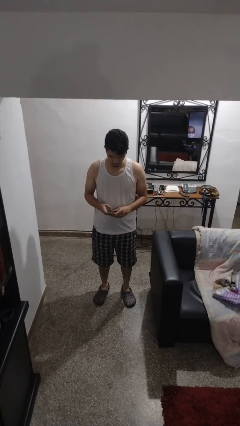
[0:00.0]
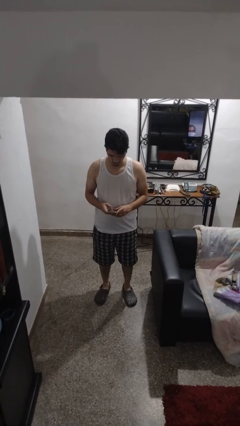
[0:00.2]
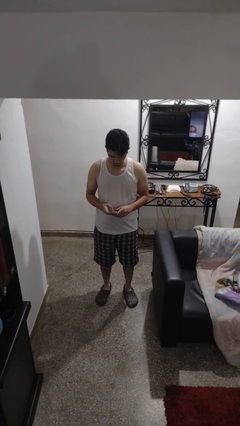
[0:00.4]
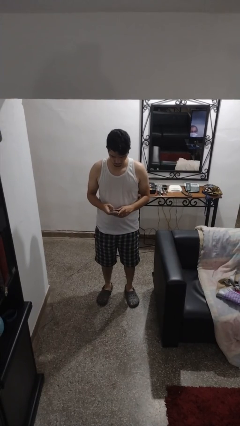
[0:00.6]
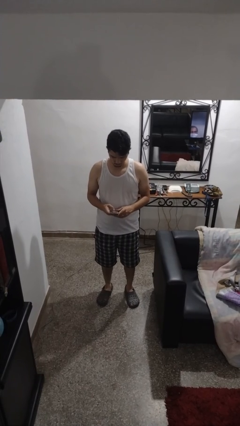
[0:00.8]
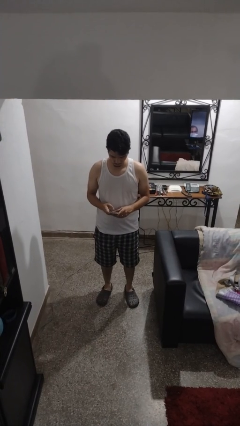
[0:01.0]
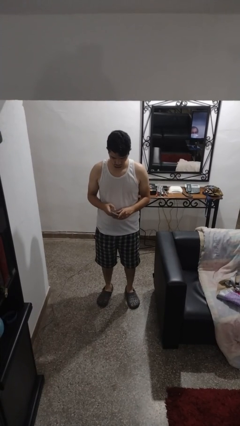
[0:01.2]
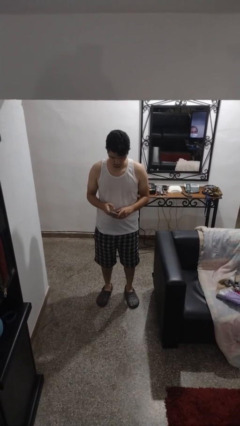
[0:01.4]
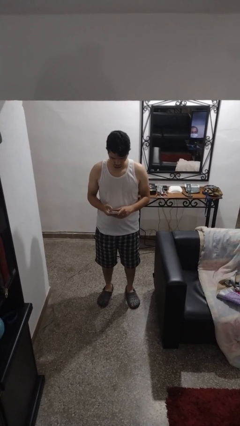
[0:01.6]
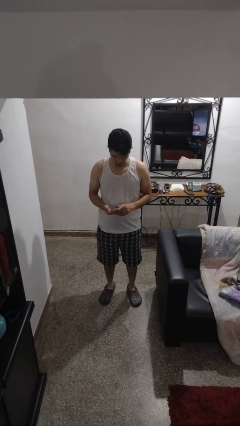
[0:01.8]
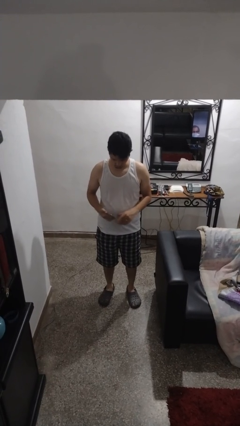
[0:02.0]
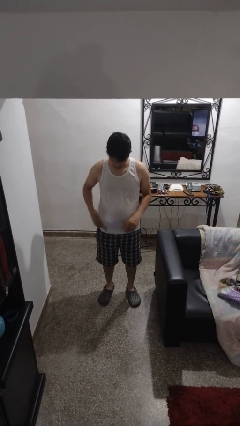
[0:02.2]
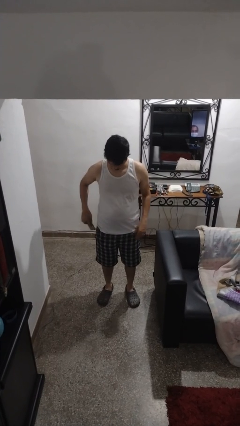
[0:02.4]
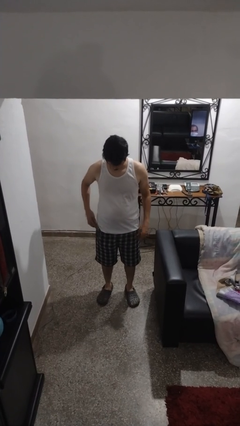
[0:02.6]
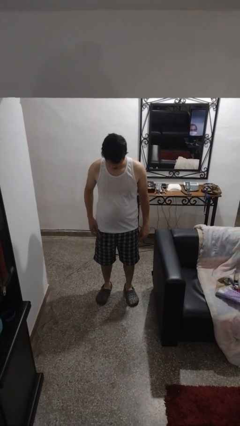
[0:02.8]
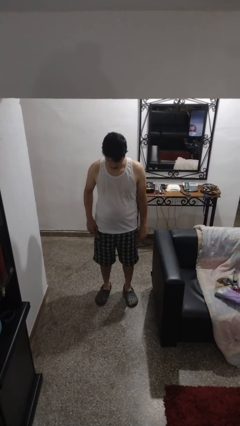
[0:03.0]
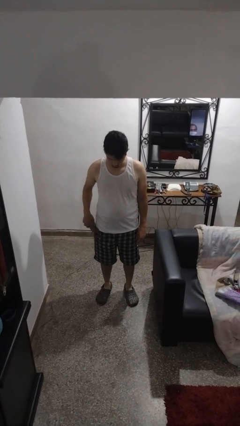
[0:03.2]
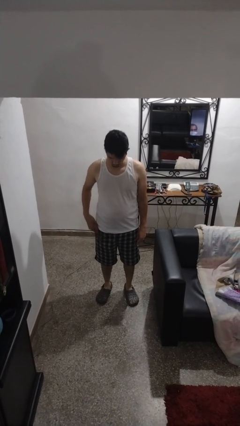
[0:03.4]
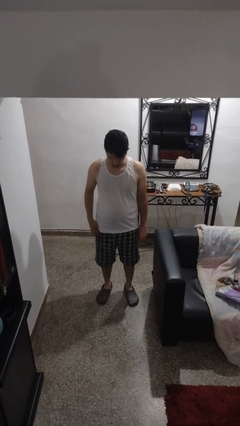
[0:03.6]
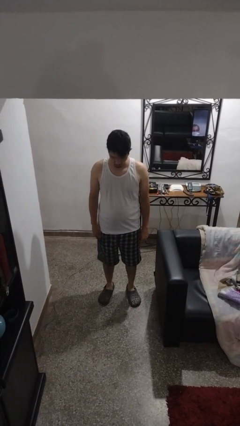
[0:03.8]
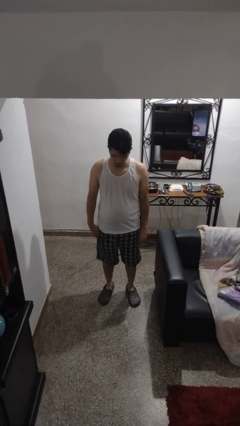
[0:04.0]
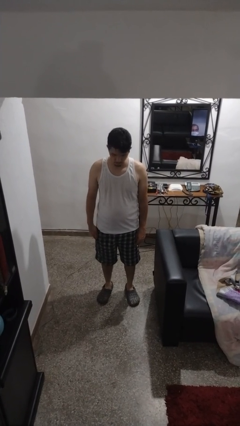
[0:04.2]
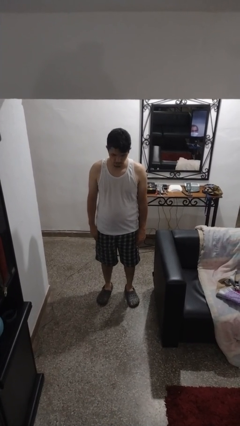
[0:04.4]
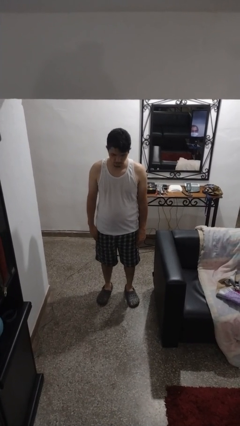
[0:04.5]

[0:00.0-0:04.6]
person puts phone into pocket

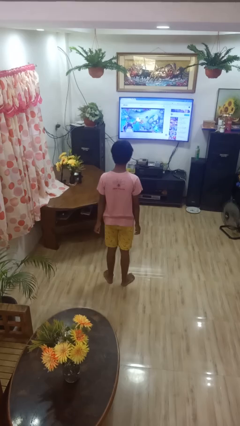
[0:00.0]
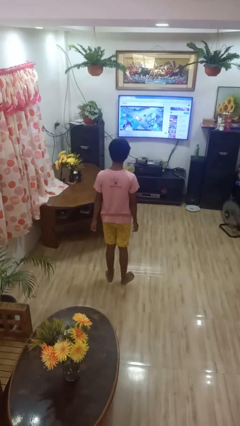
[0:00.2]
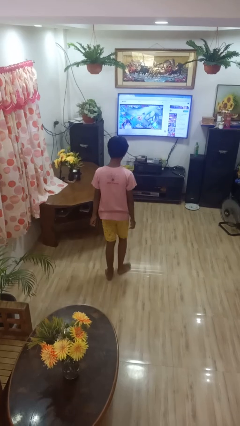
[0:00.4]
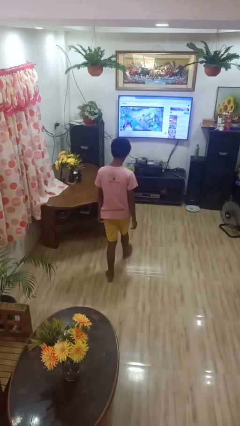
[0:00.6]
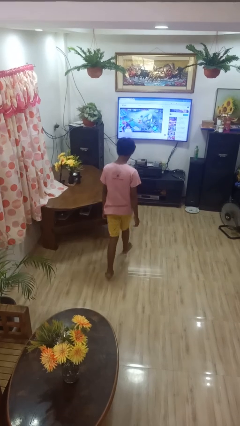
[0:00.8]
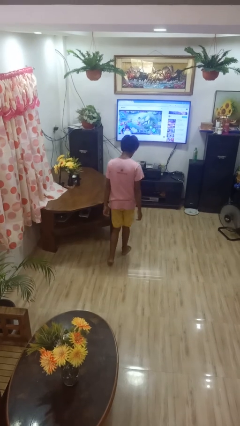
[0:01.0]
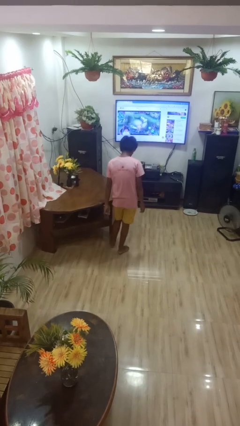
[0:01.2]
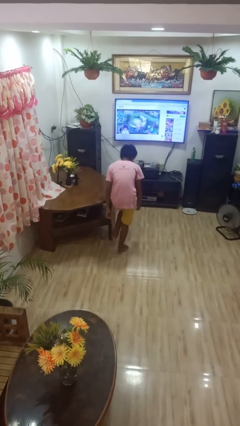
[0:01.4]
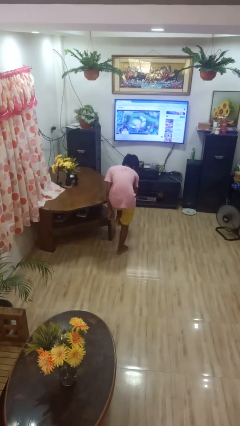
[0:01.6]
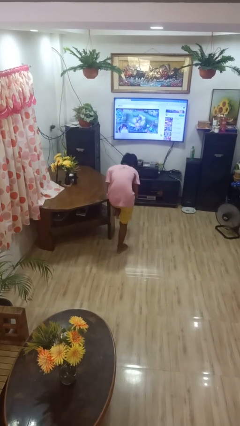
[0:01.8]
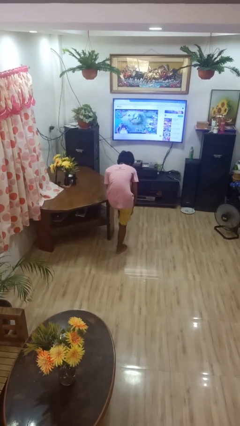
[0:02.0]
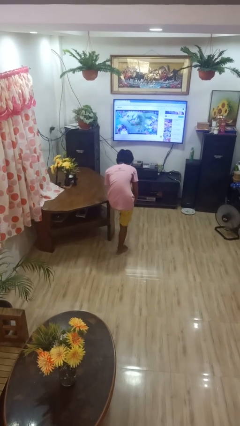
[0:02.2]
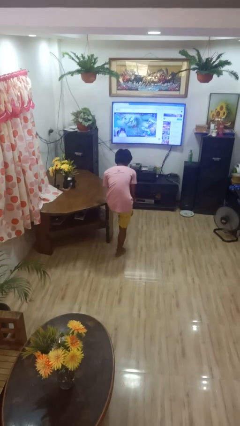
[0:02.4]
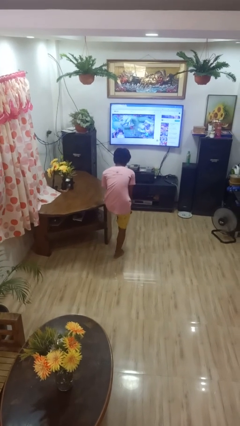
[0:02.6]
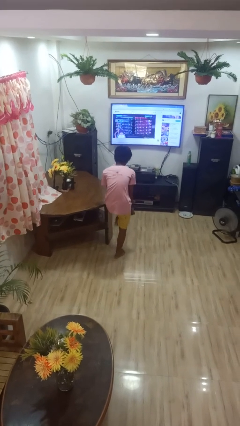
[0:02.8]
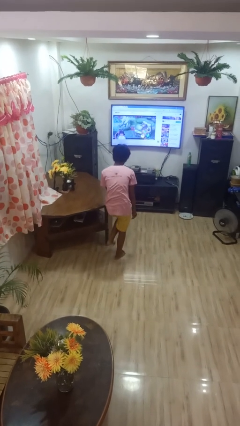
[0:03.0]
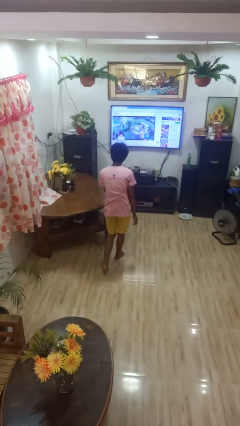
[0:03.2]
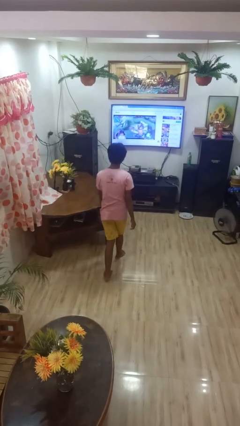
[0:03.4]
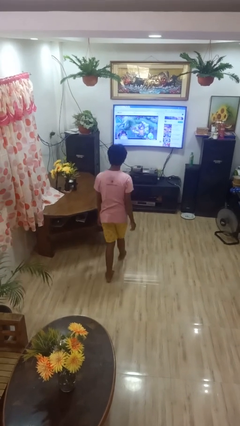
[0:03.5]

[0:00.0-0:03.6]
person stubs toe

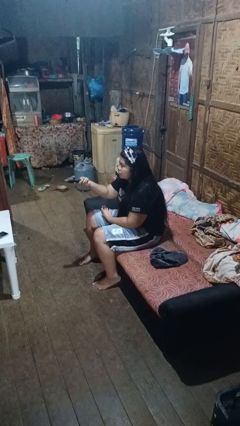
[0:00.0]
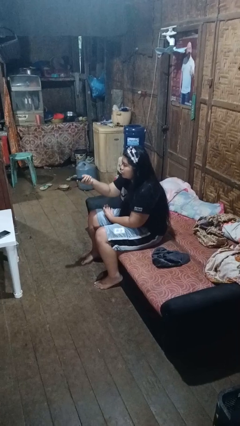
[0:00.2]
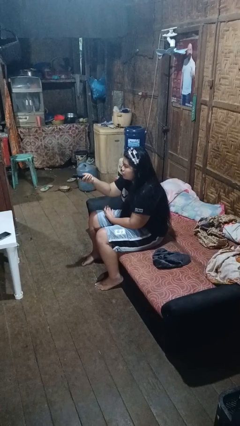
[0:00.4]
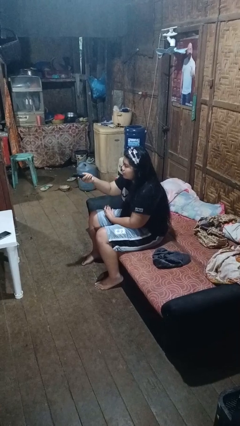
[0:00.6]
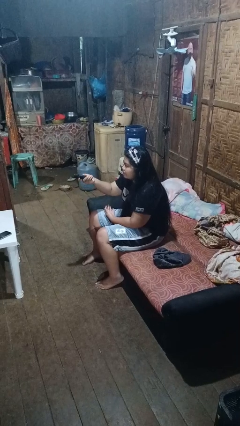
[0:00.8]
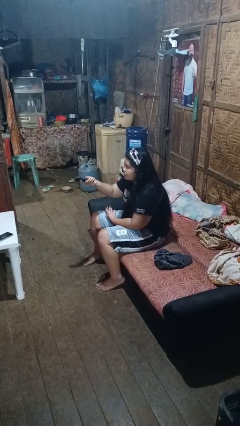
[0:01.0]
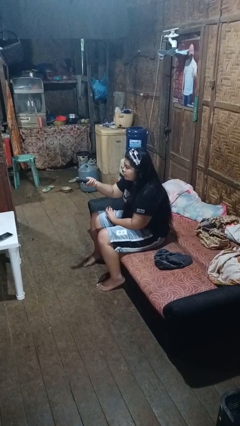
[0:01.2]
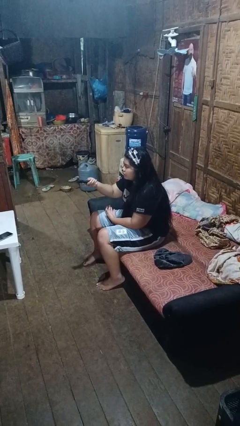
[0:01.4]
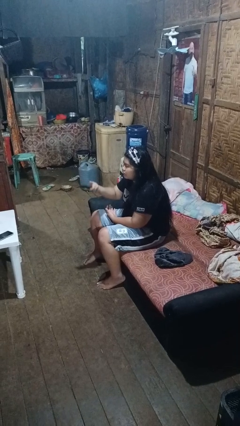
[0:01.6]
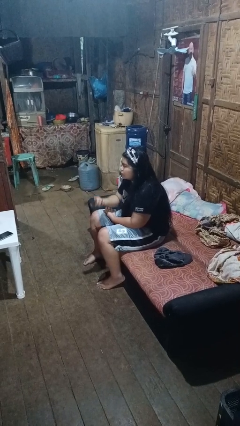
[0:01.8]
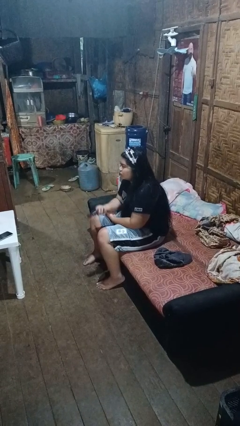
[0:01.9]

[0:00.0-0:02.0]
person uses television remote

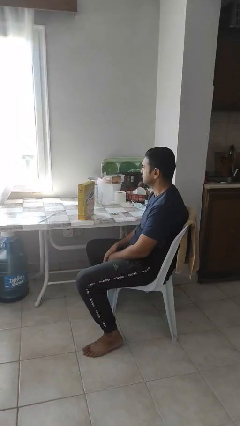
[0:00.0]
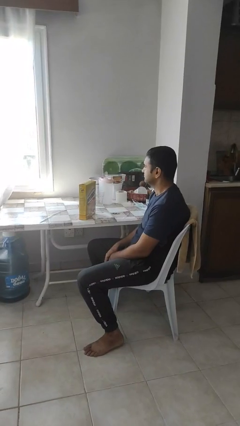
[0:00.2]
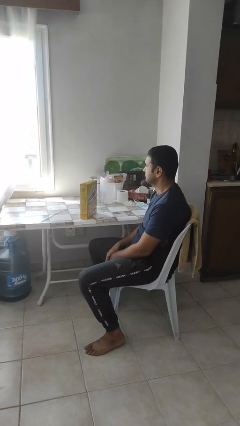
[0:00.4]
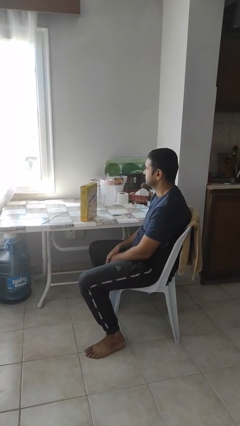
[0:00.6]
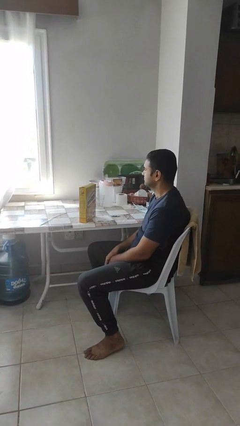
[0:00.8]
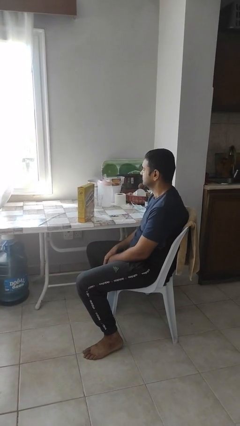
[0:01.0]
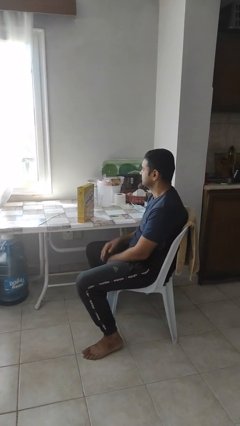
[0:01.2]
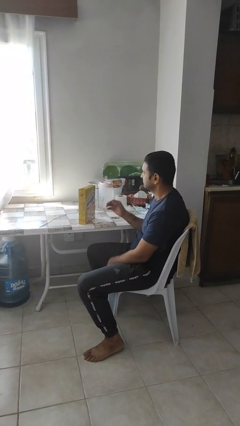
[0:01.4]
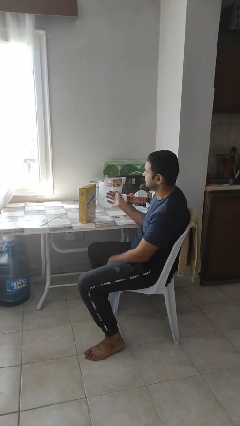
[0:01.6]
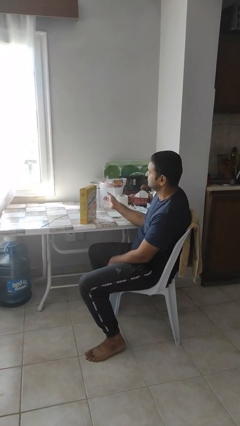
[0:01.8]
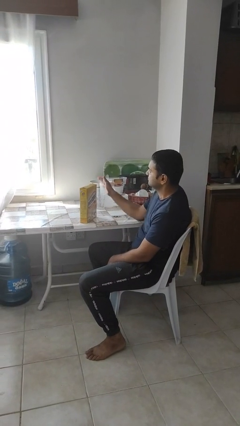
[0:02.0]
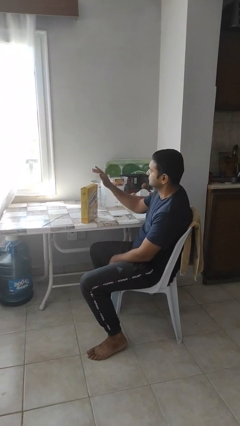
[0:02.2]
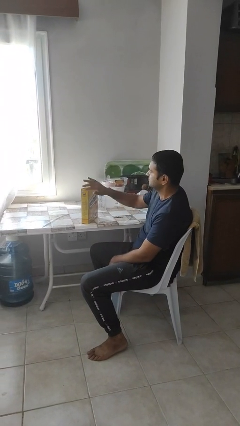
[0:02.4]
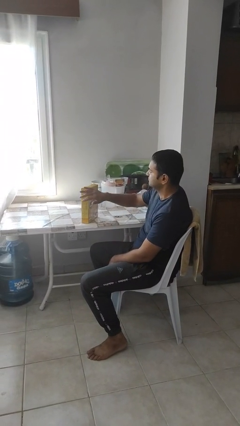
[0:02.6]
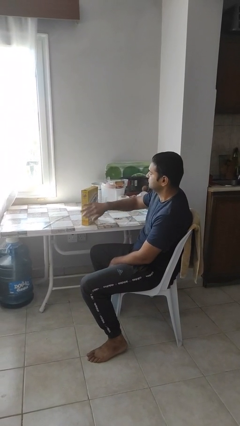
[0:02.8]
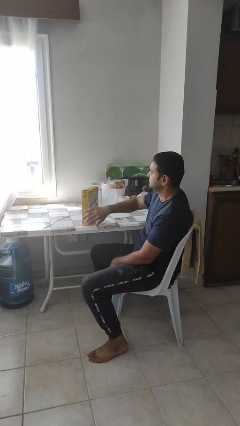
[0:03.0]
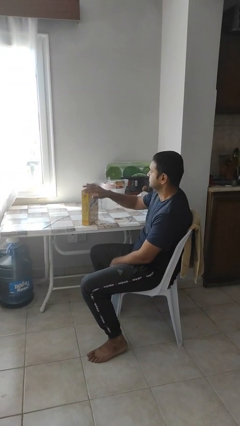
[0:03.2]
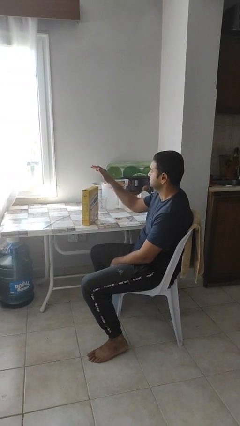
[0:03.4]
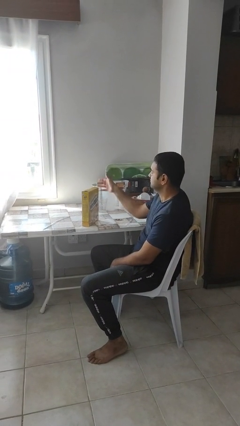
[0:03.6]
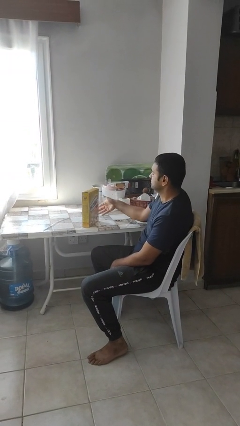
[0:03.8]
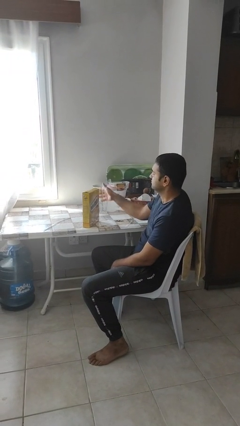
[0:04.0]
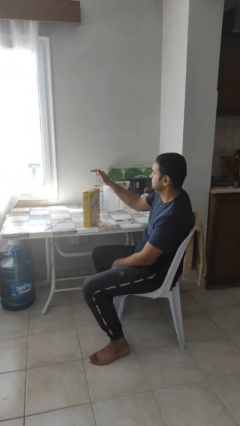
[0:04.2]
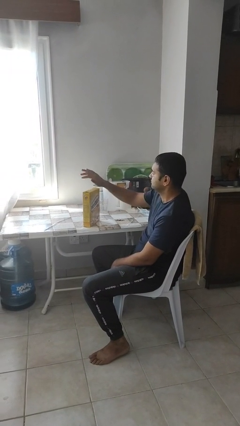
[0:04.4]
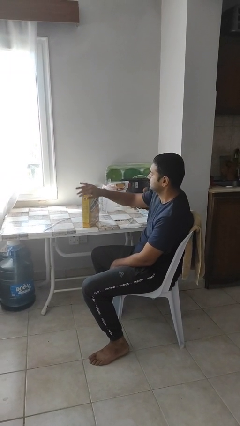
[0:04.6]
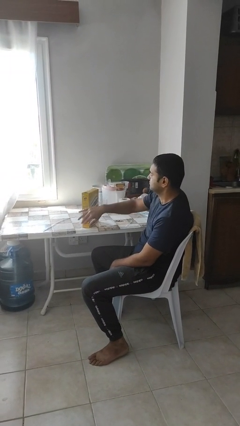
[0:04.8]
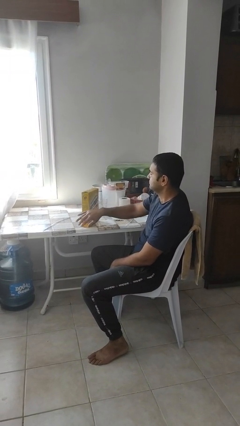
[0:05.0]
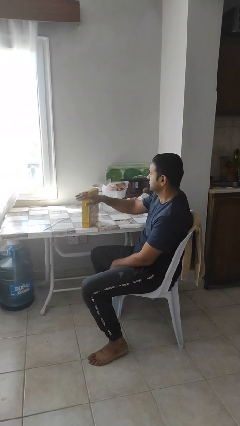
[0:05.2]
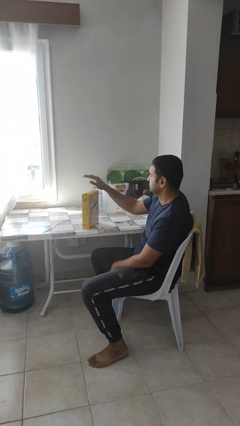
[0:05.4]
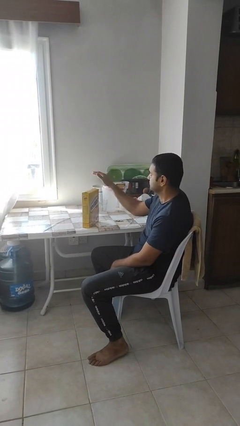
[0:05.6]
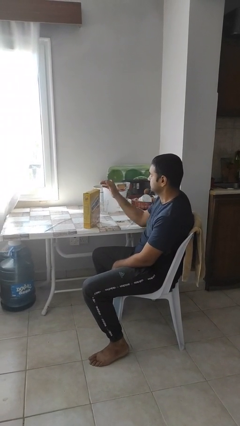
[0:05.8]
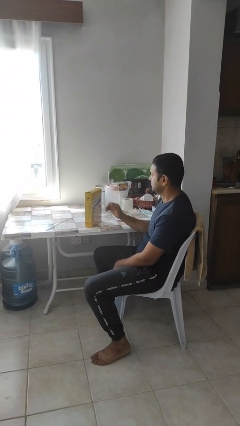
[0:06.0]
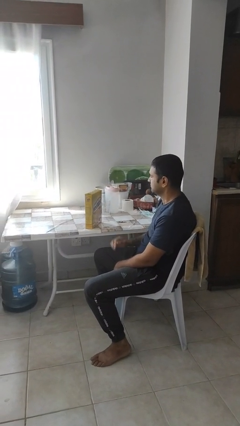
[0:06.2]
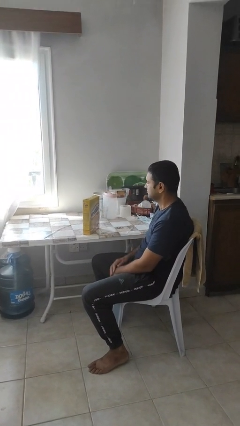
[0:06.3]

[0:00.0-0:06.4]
person waves hand over object

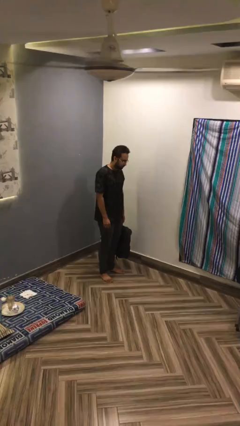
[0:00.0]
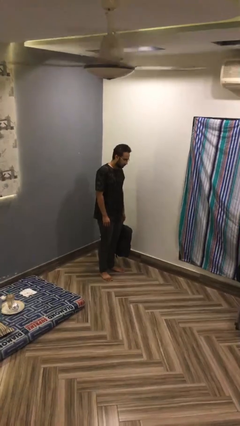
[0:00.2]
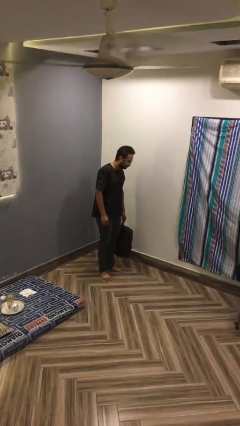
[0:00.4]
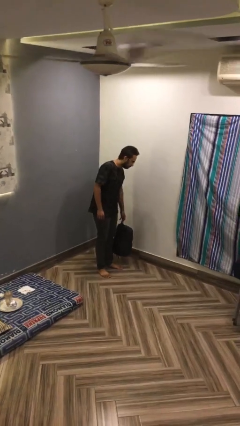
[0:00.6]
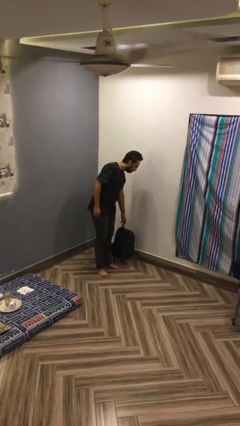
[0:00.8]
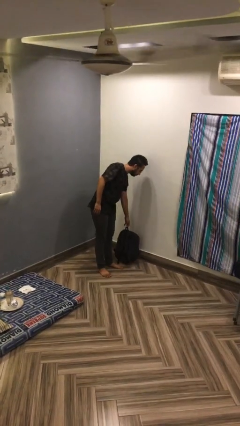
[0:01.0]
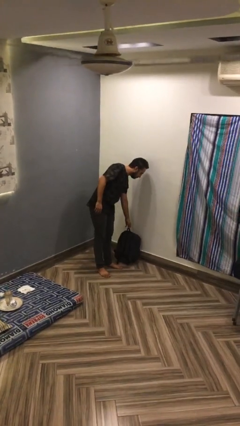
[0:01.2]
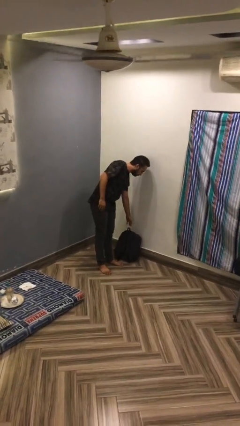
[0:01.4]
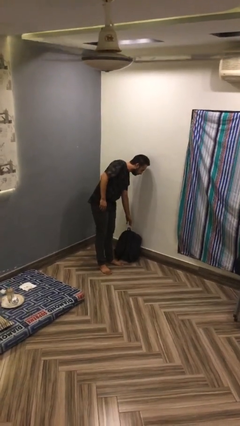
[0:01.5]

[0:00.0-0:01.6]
person puts down object on floor
